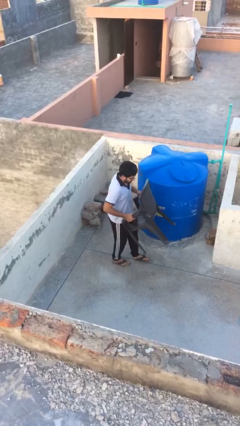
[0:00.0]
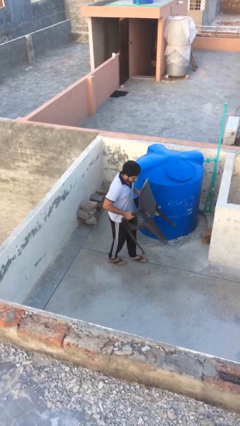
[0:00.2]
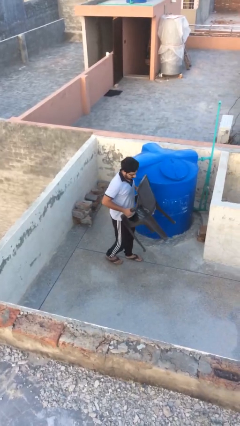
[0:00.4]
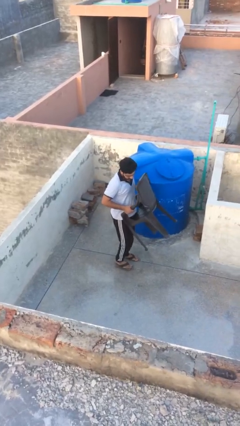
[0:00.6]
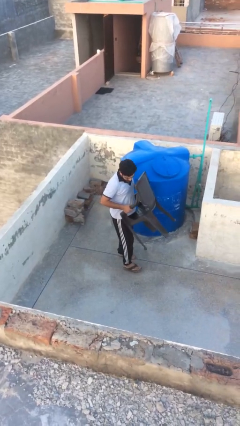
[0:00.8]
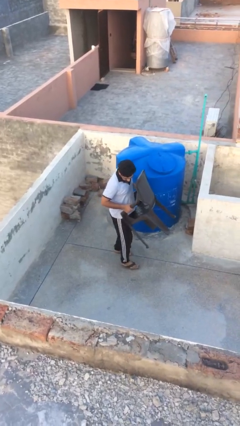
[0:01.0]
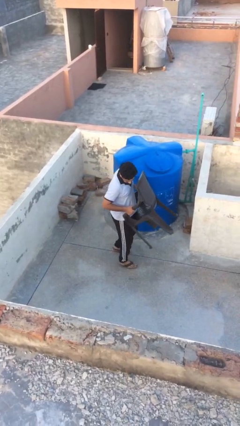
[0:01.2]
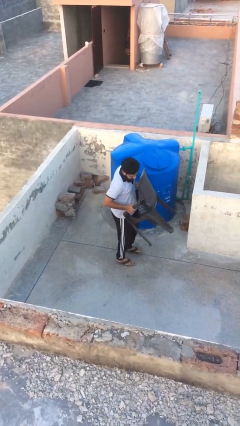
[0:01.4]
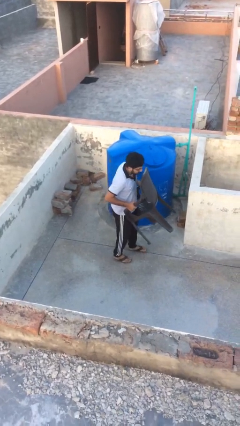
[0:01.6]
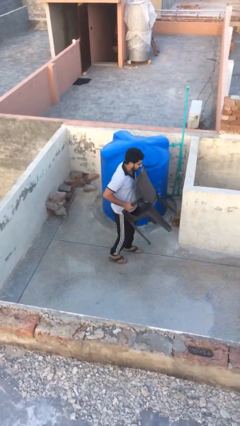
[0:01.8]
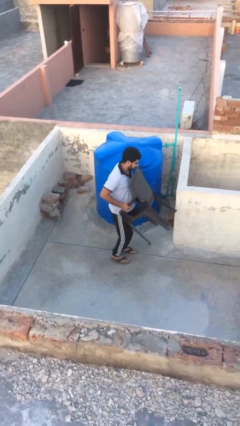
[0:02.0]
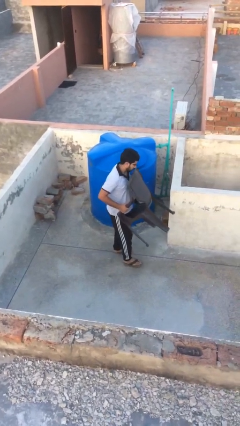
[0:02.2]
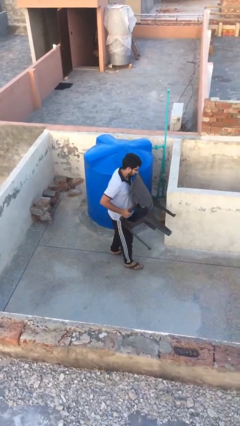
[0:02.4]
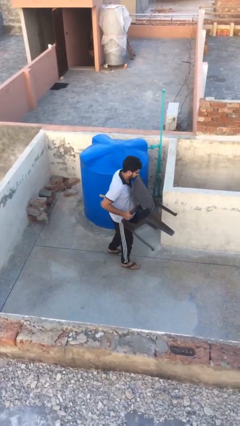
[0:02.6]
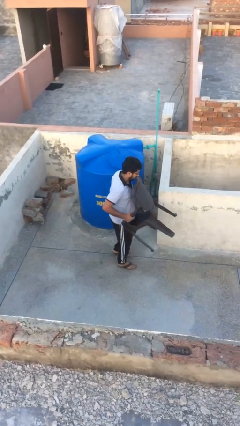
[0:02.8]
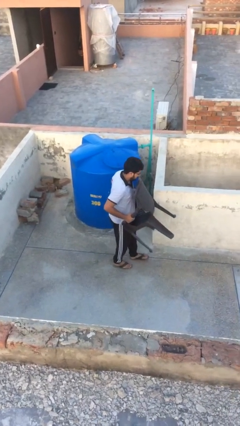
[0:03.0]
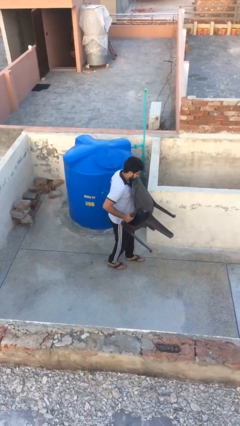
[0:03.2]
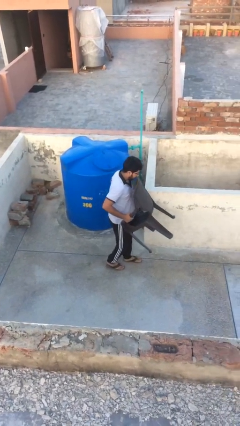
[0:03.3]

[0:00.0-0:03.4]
person carries heavy object

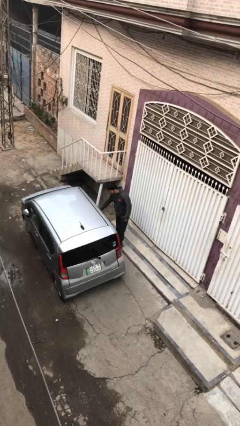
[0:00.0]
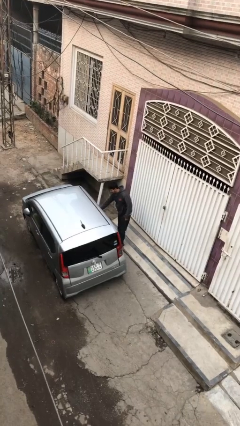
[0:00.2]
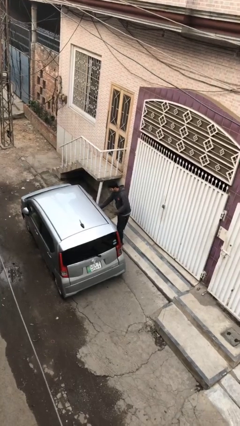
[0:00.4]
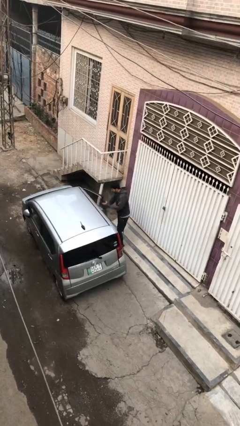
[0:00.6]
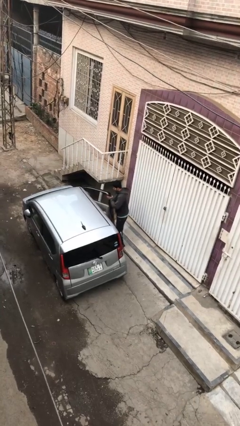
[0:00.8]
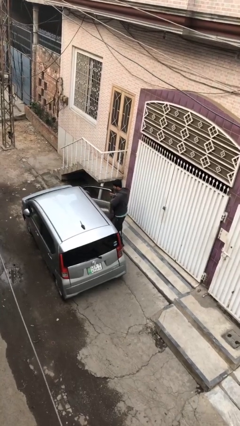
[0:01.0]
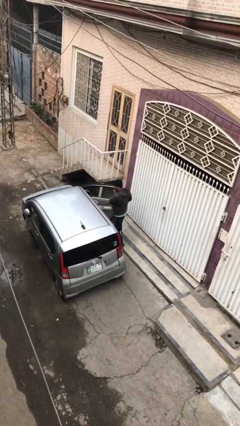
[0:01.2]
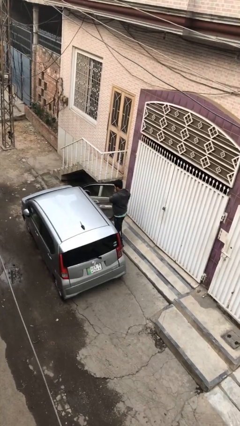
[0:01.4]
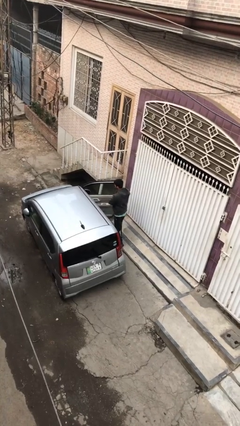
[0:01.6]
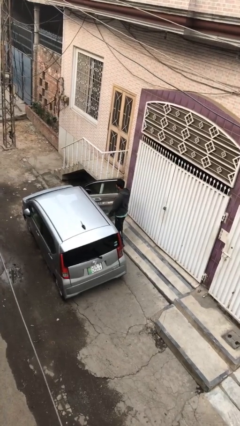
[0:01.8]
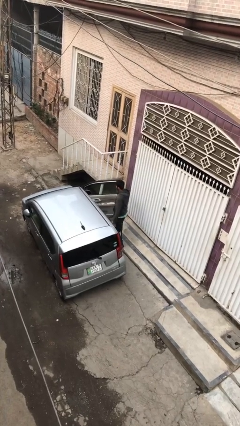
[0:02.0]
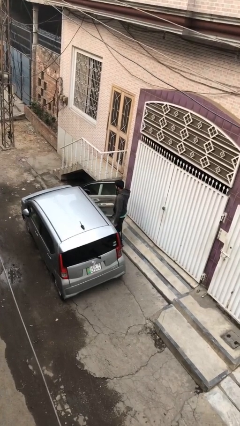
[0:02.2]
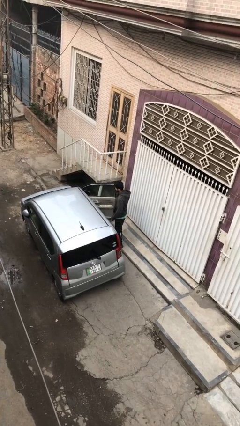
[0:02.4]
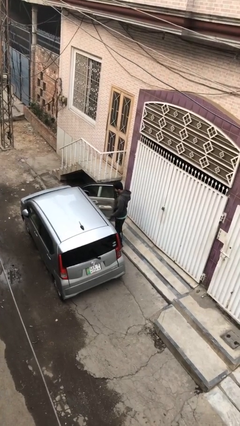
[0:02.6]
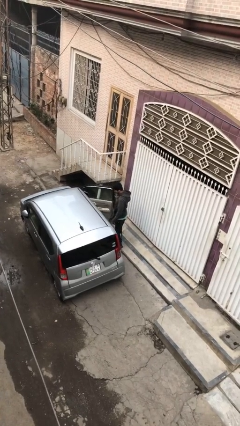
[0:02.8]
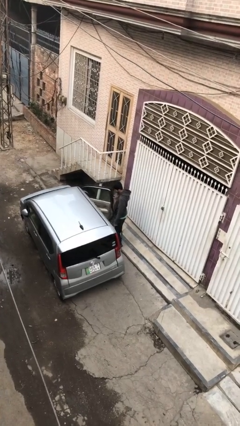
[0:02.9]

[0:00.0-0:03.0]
person opens car door

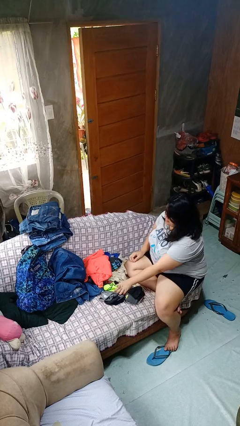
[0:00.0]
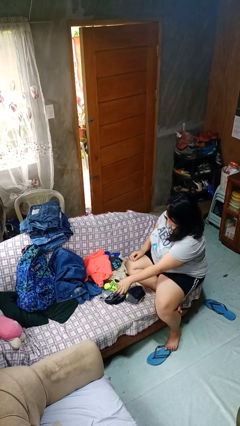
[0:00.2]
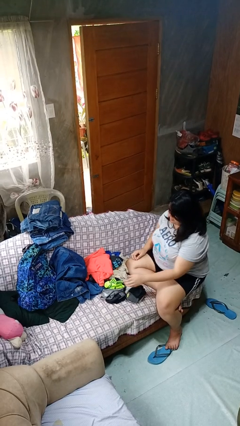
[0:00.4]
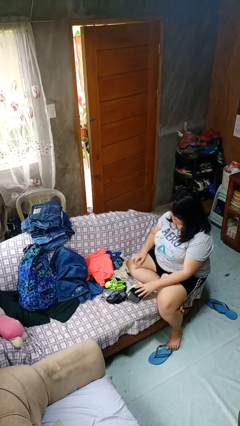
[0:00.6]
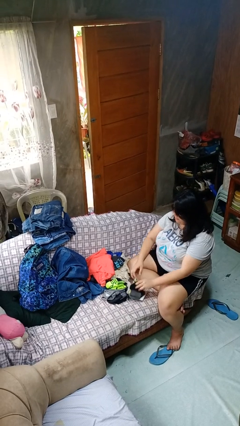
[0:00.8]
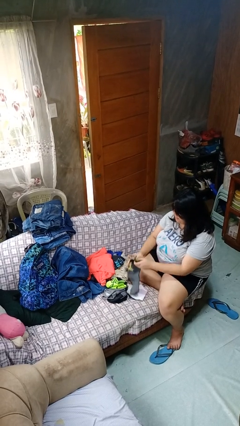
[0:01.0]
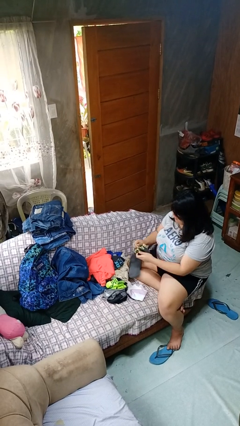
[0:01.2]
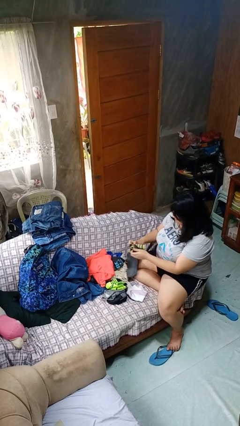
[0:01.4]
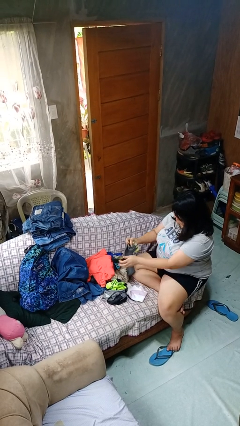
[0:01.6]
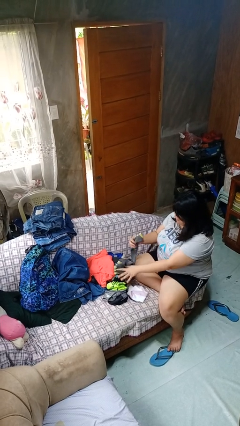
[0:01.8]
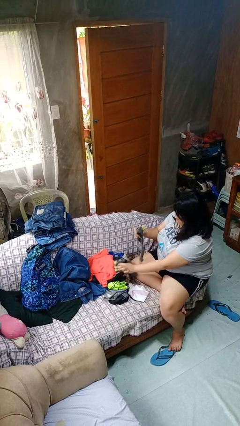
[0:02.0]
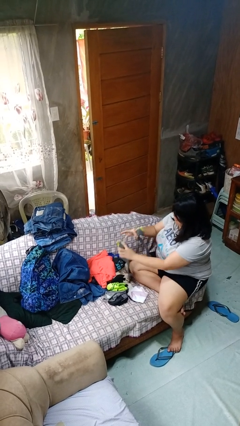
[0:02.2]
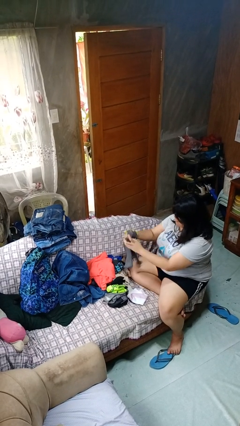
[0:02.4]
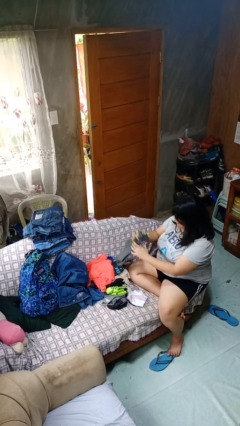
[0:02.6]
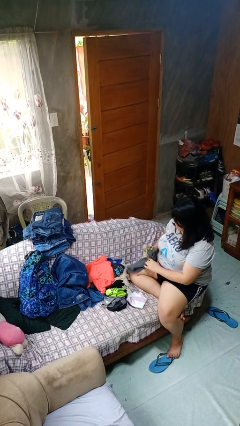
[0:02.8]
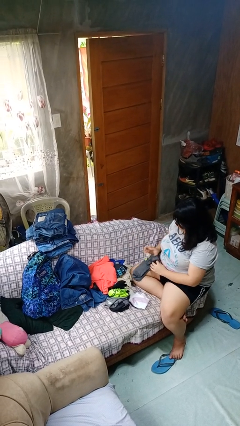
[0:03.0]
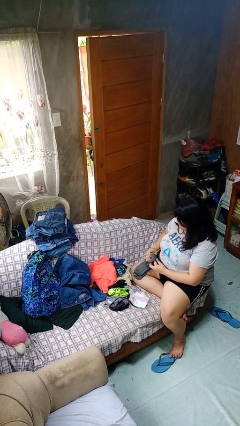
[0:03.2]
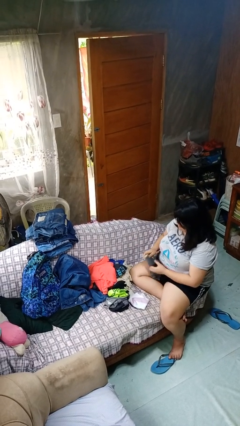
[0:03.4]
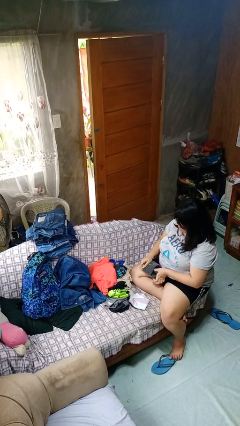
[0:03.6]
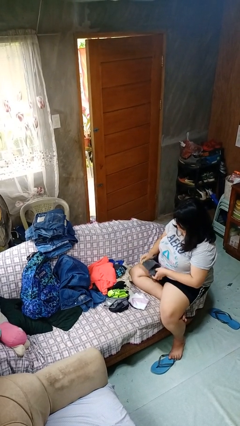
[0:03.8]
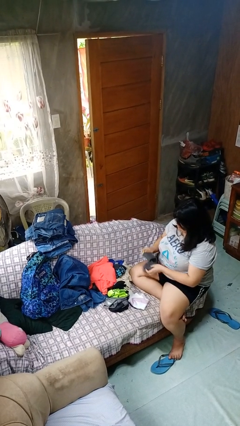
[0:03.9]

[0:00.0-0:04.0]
person folds socks

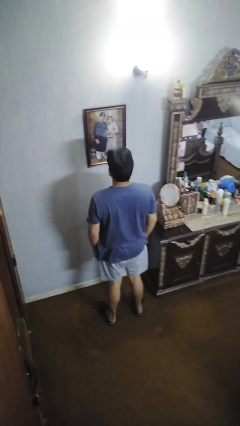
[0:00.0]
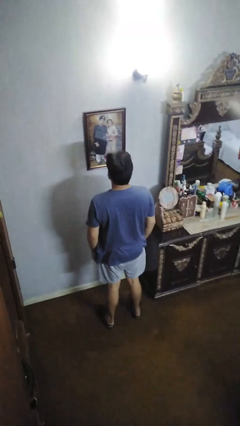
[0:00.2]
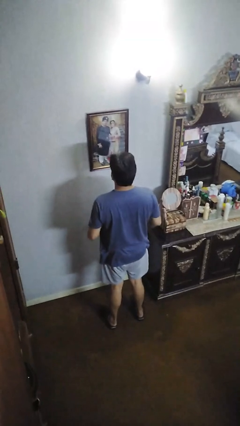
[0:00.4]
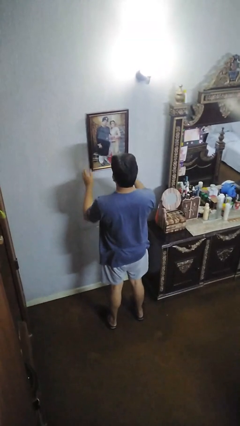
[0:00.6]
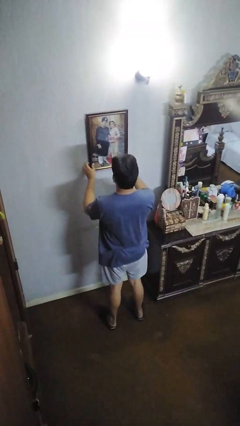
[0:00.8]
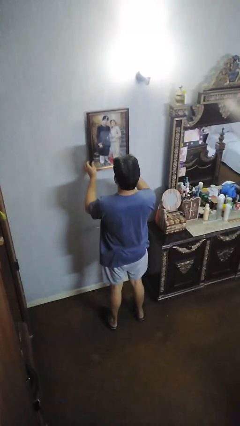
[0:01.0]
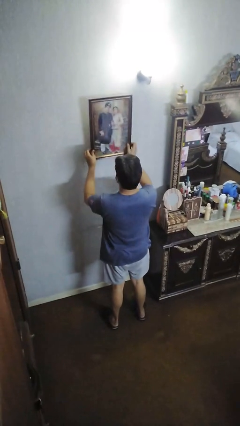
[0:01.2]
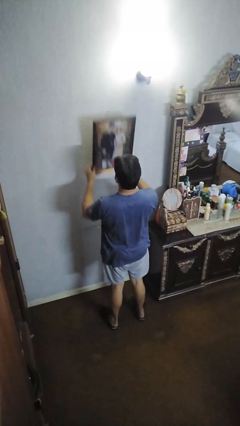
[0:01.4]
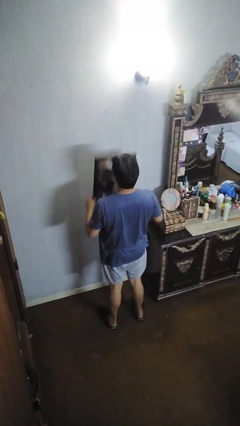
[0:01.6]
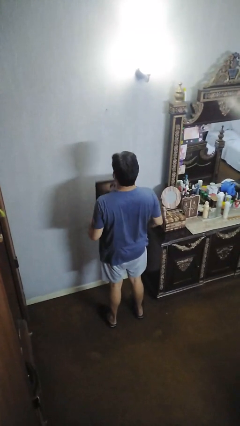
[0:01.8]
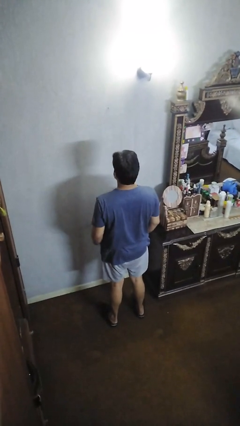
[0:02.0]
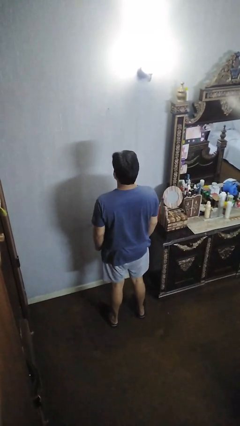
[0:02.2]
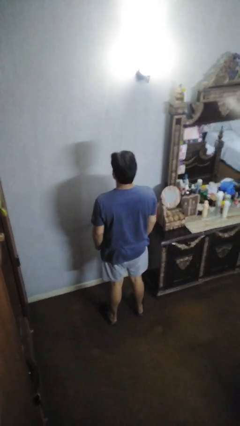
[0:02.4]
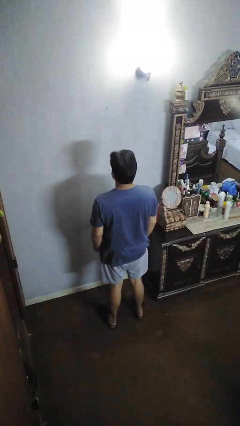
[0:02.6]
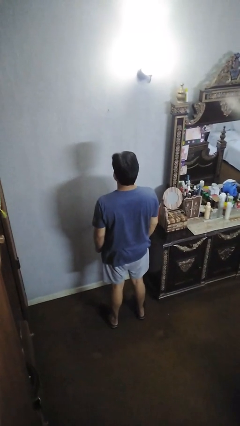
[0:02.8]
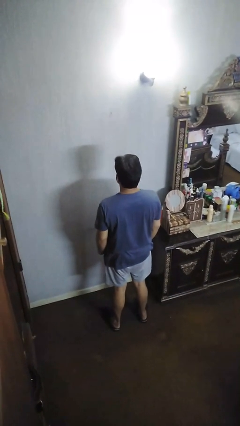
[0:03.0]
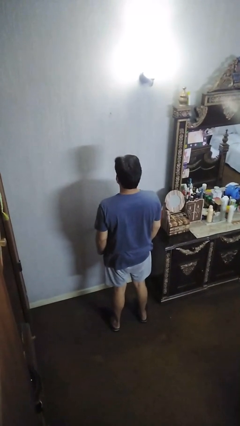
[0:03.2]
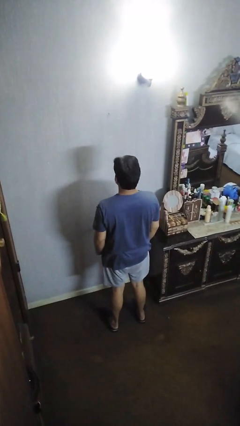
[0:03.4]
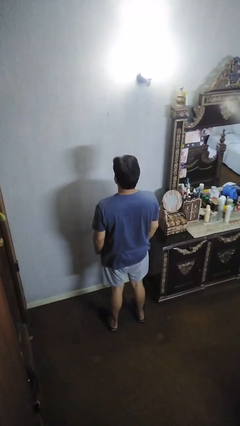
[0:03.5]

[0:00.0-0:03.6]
person takes down picture frame

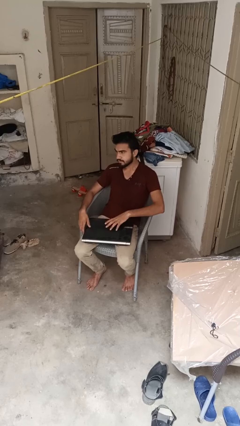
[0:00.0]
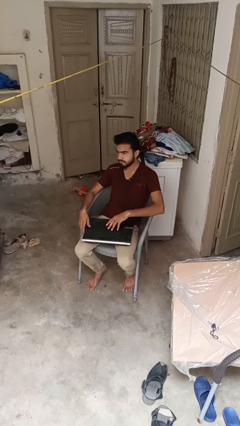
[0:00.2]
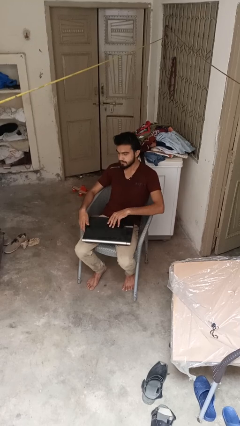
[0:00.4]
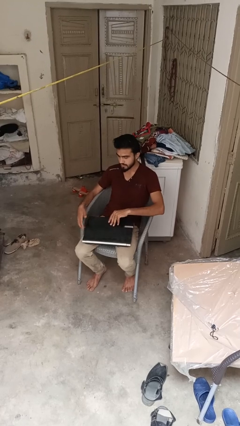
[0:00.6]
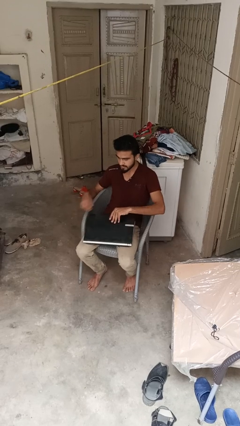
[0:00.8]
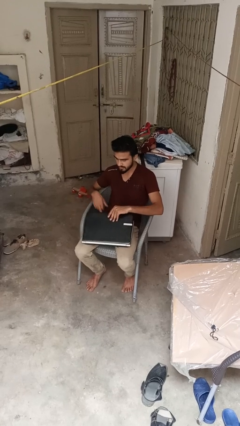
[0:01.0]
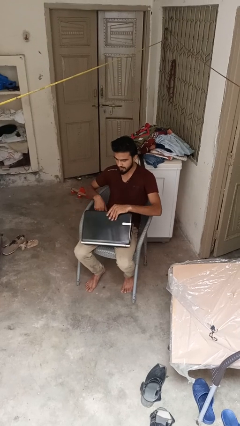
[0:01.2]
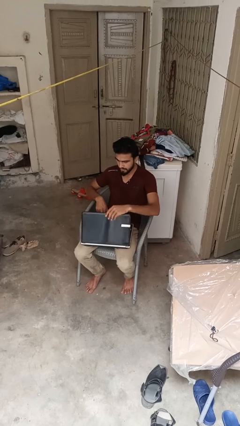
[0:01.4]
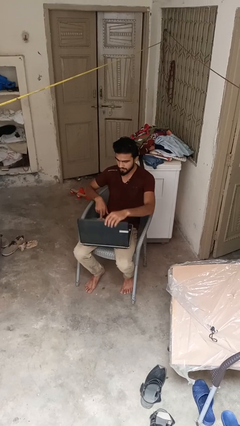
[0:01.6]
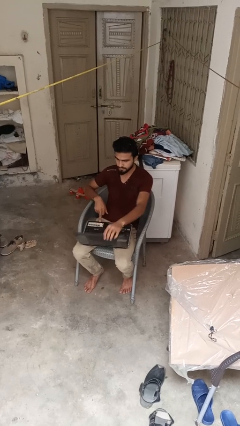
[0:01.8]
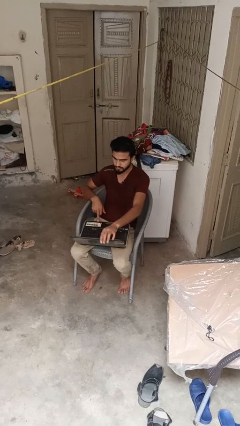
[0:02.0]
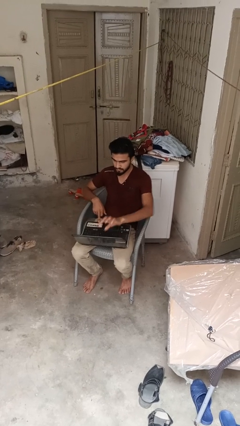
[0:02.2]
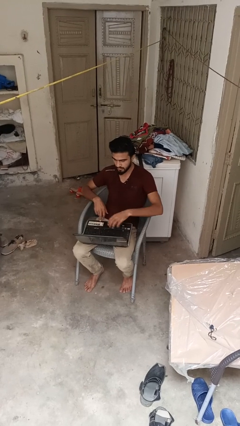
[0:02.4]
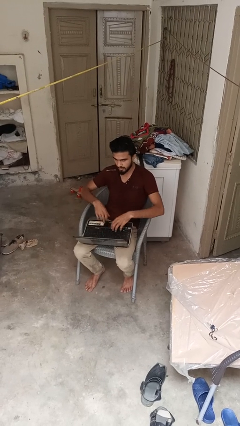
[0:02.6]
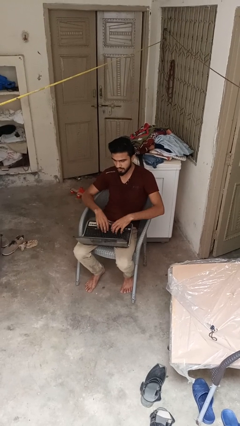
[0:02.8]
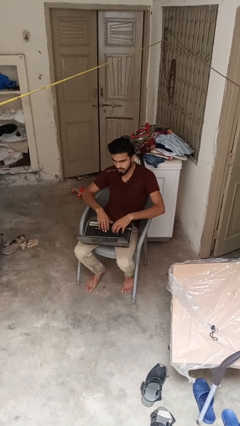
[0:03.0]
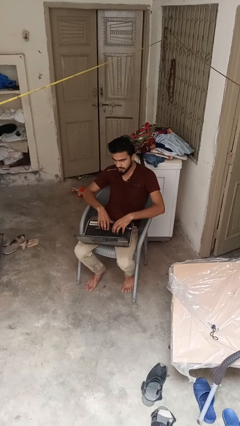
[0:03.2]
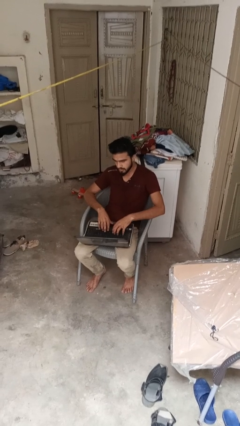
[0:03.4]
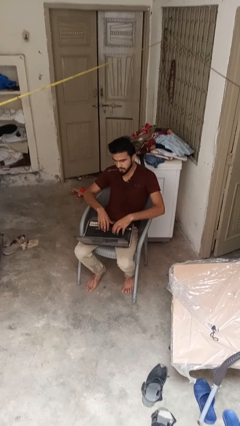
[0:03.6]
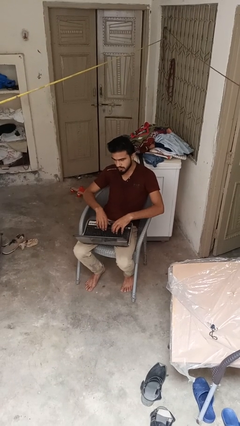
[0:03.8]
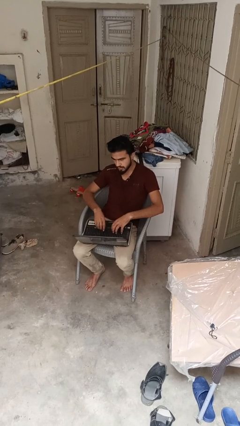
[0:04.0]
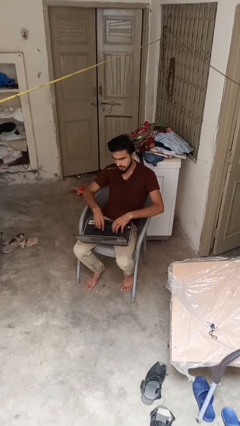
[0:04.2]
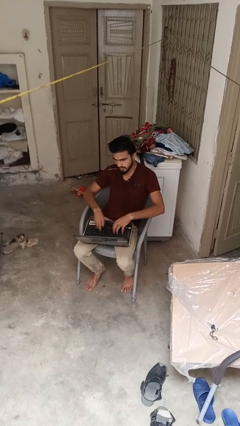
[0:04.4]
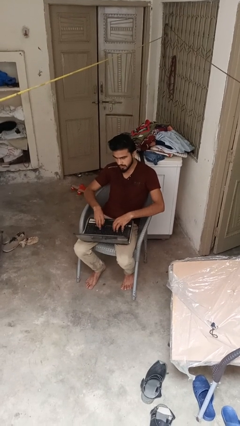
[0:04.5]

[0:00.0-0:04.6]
person opens laptop
